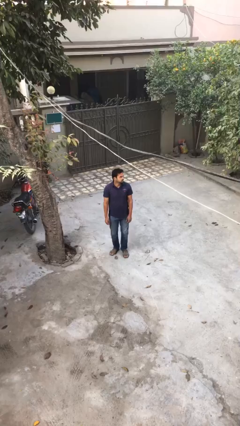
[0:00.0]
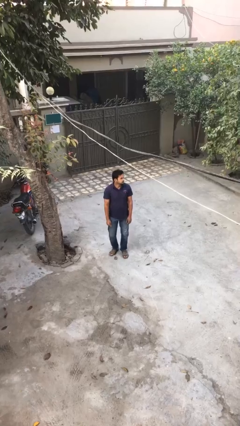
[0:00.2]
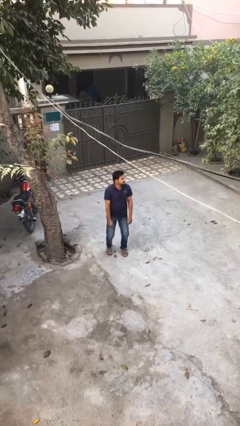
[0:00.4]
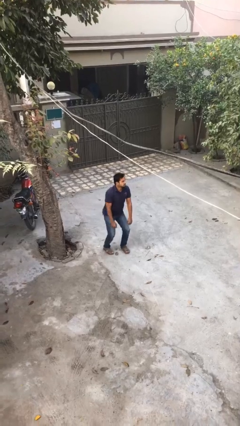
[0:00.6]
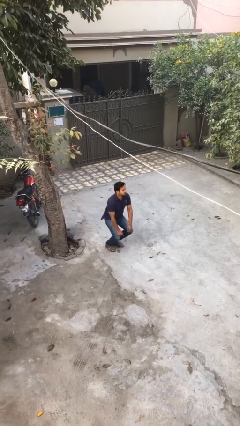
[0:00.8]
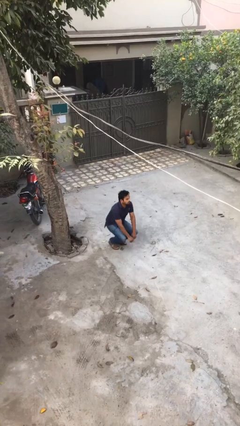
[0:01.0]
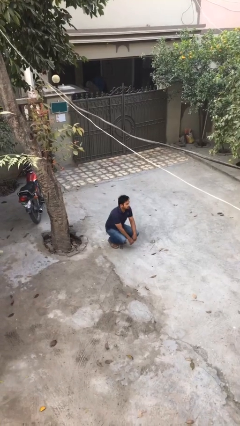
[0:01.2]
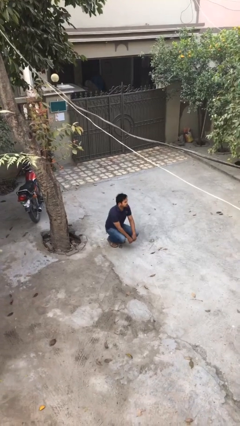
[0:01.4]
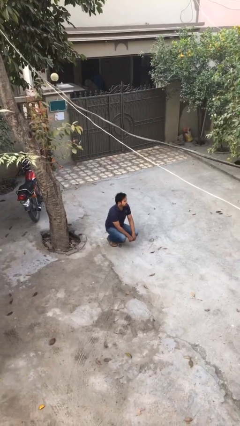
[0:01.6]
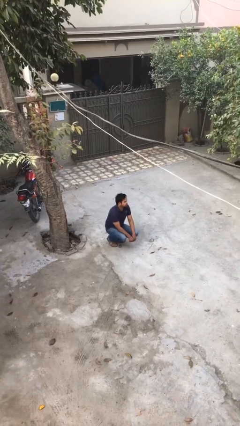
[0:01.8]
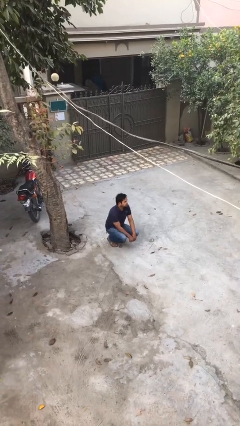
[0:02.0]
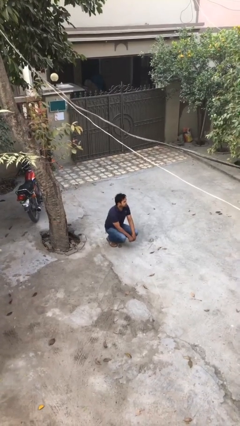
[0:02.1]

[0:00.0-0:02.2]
person sits down

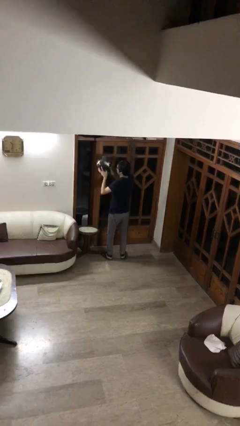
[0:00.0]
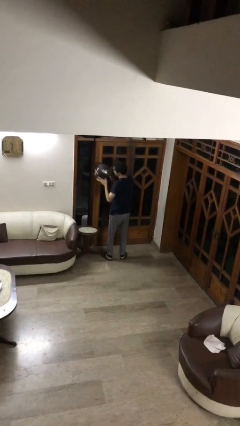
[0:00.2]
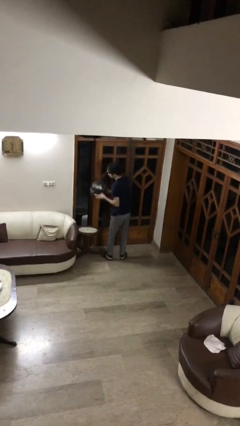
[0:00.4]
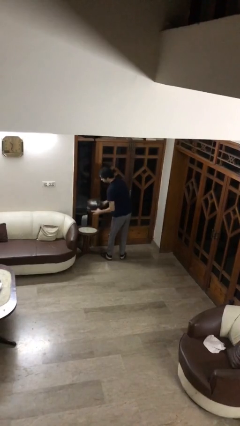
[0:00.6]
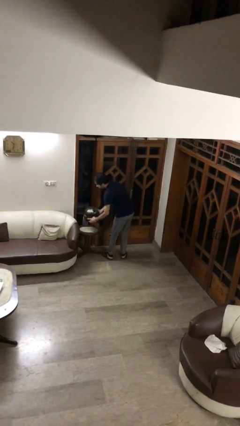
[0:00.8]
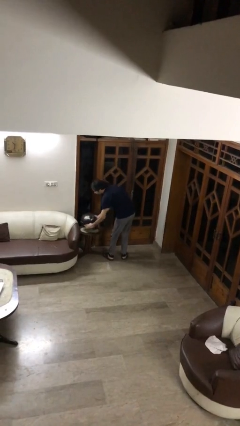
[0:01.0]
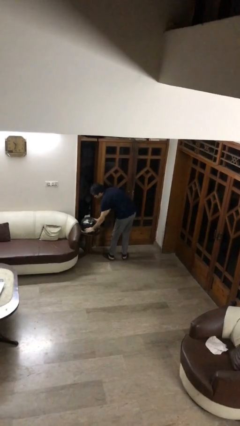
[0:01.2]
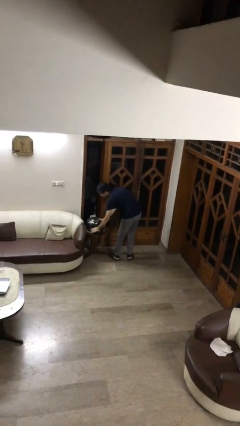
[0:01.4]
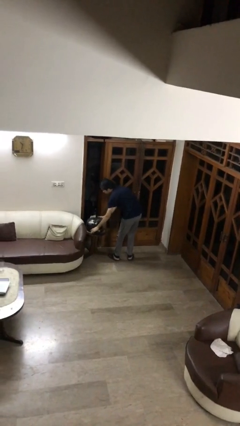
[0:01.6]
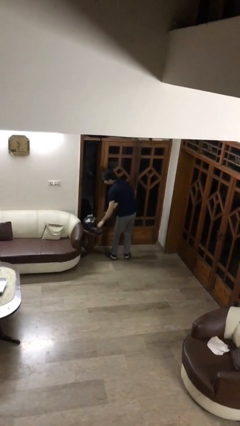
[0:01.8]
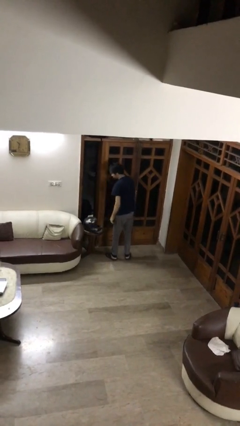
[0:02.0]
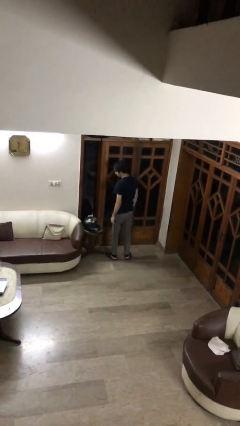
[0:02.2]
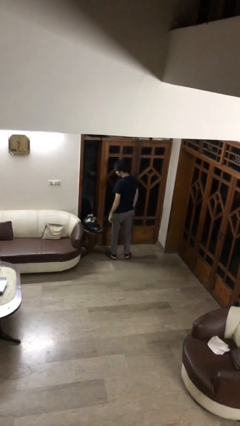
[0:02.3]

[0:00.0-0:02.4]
person puts down object on table

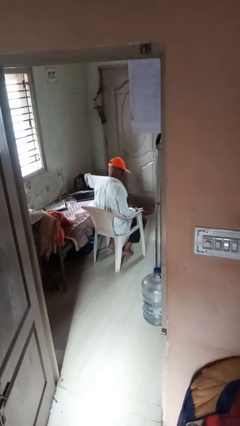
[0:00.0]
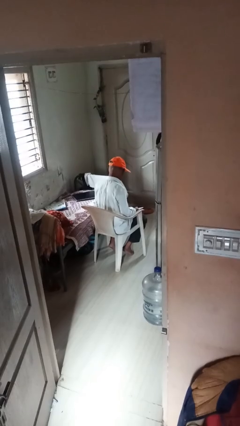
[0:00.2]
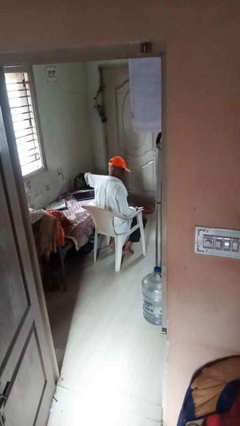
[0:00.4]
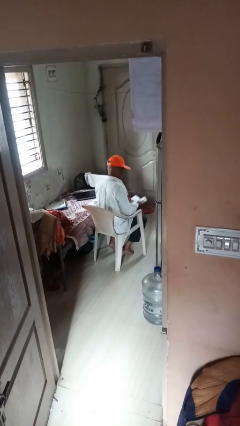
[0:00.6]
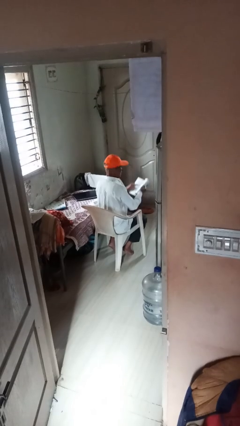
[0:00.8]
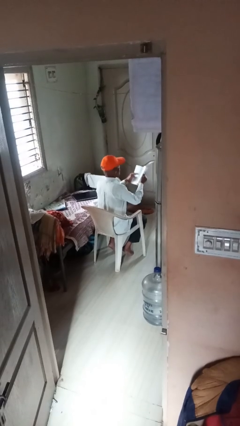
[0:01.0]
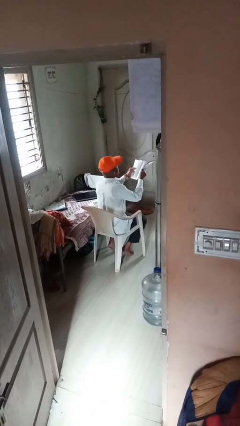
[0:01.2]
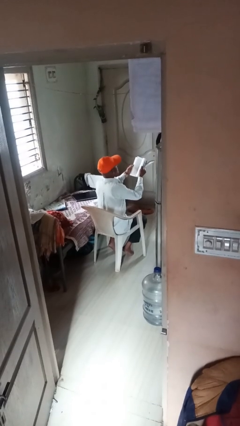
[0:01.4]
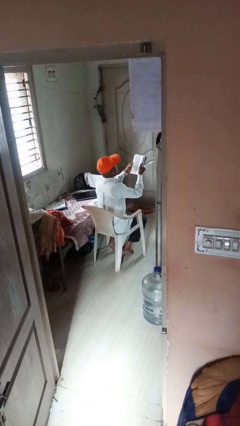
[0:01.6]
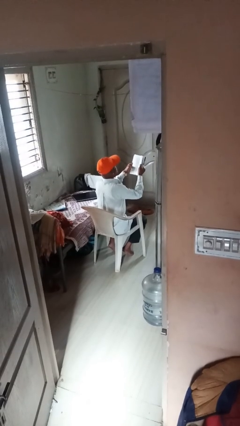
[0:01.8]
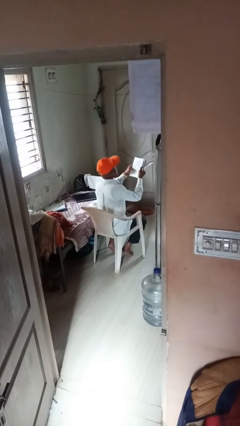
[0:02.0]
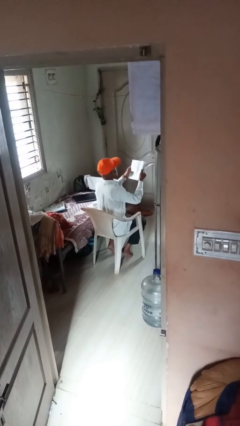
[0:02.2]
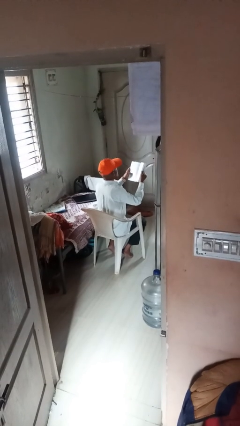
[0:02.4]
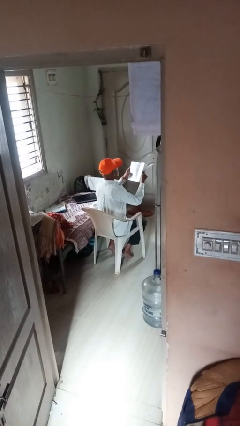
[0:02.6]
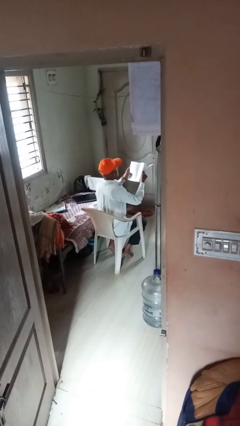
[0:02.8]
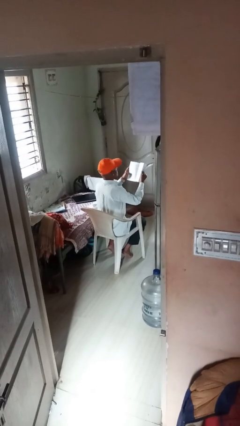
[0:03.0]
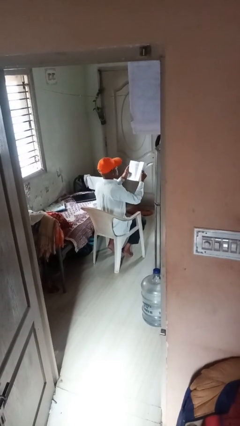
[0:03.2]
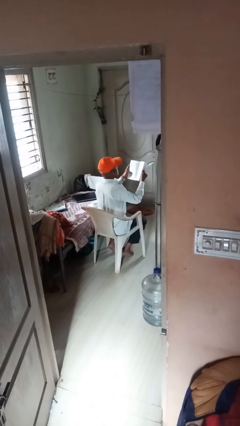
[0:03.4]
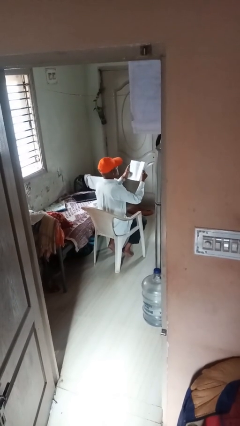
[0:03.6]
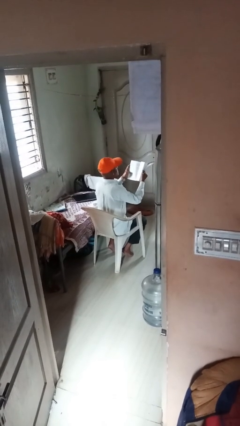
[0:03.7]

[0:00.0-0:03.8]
person reads book

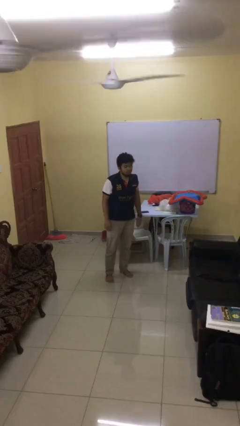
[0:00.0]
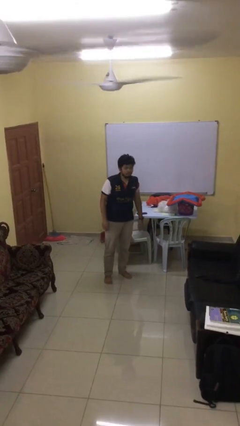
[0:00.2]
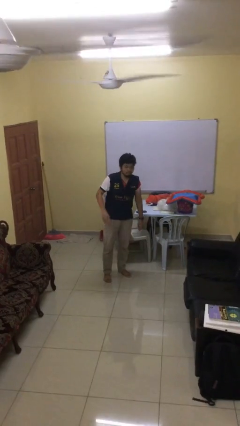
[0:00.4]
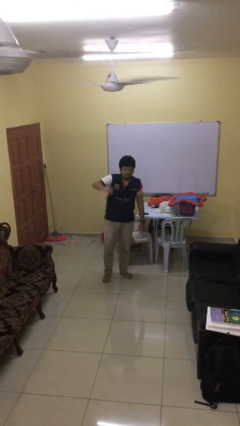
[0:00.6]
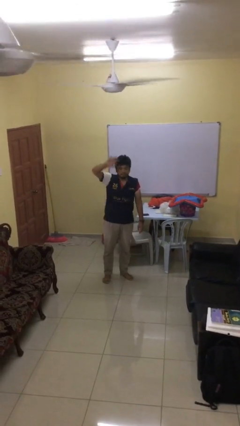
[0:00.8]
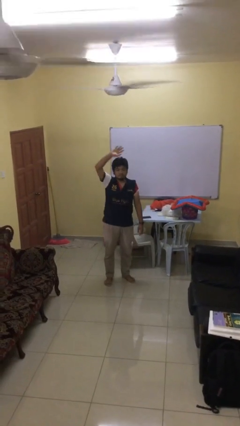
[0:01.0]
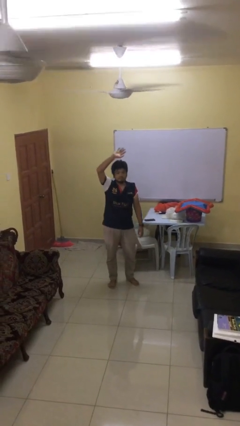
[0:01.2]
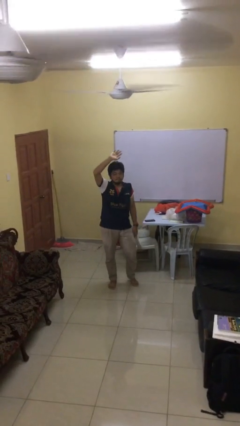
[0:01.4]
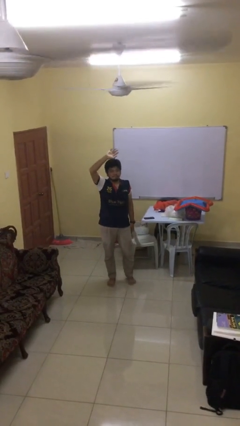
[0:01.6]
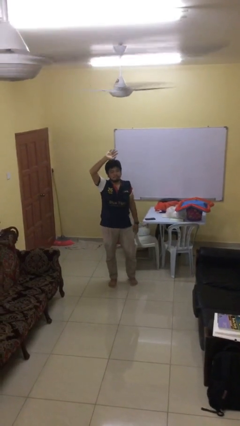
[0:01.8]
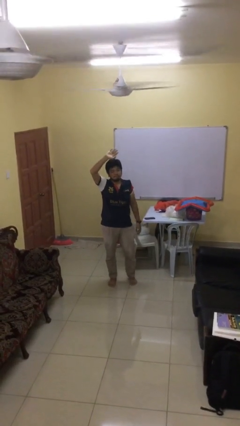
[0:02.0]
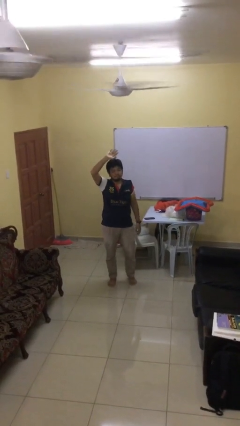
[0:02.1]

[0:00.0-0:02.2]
person gestures raise hand

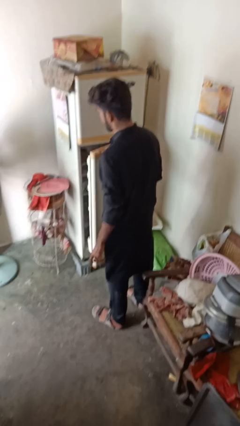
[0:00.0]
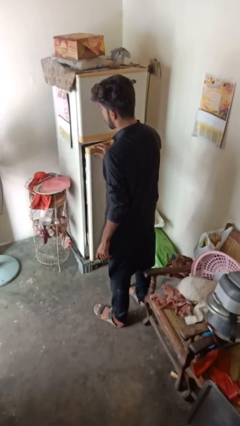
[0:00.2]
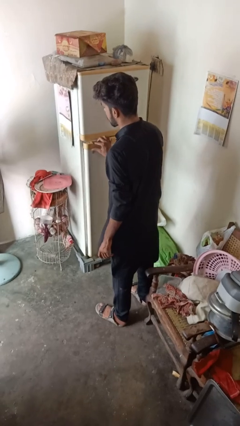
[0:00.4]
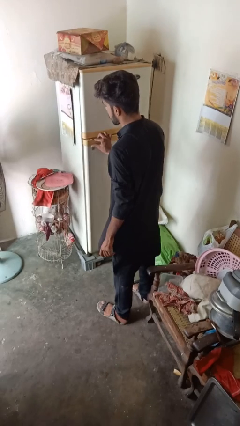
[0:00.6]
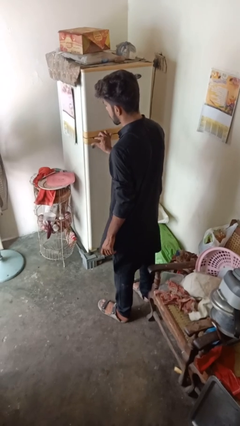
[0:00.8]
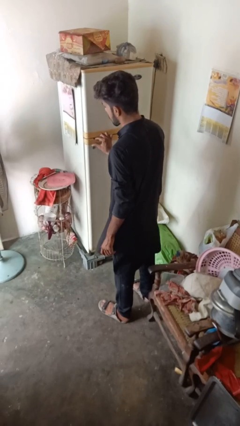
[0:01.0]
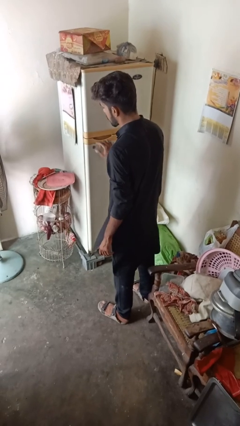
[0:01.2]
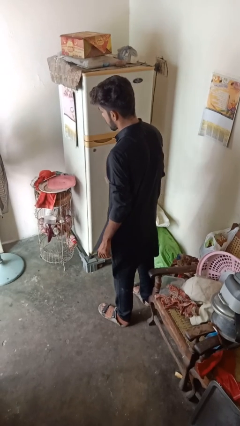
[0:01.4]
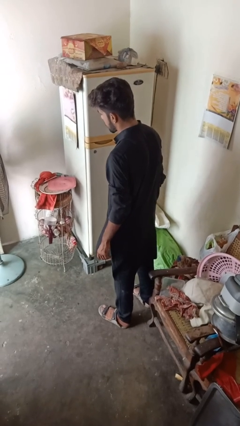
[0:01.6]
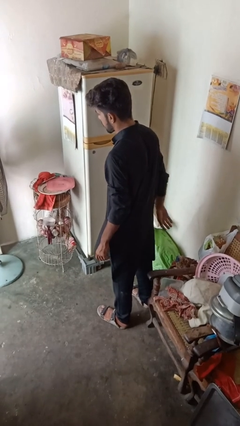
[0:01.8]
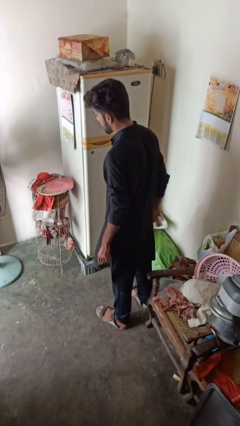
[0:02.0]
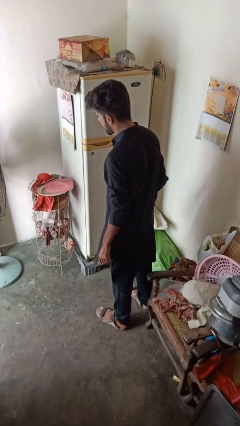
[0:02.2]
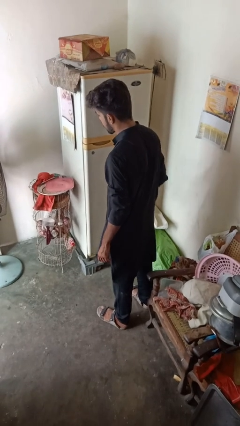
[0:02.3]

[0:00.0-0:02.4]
person closes refrigerator

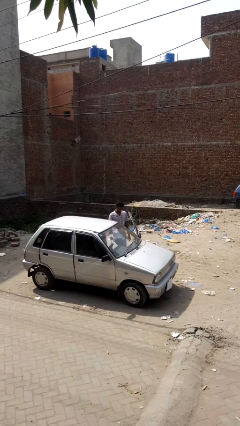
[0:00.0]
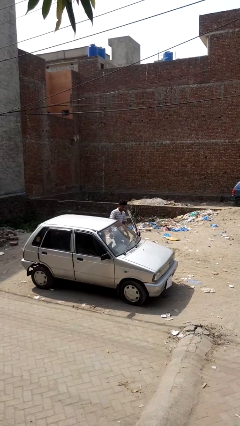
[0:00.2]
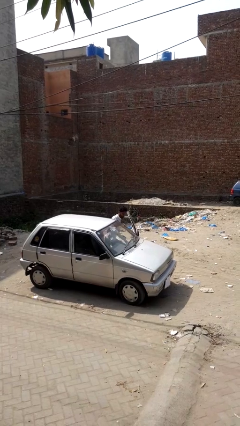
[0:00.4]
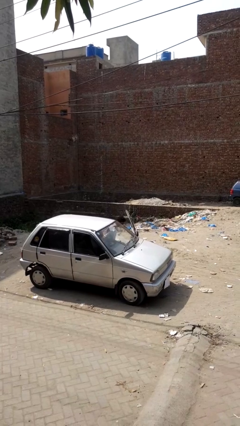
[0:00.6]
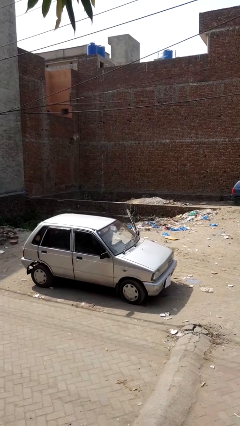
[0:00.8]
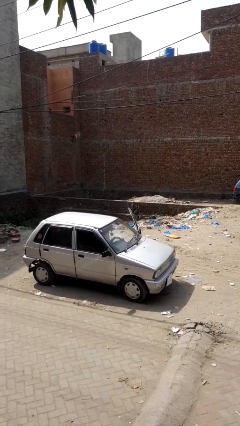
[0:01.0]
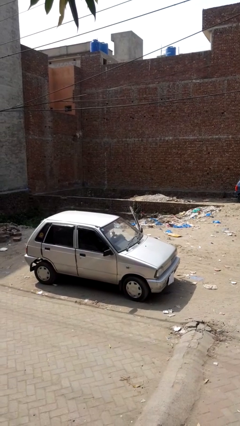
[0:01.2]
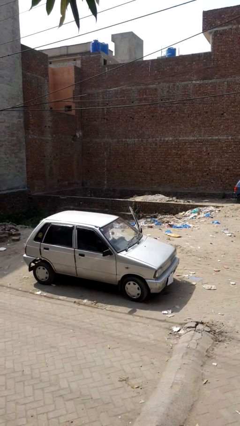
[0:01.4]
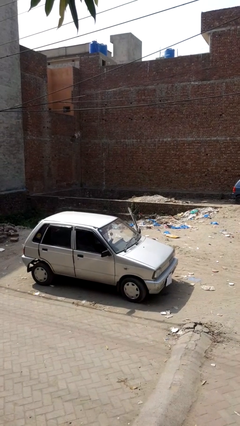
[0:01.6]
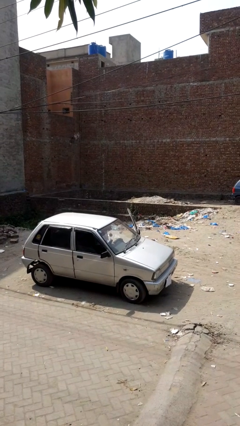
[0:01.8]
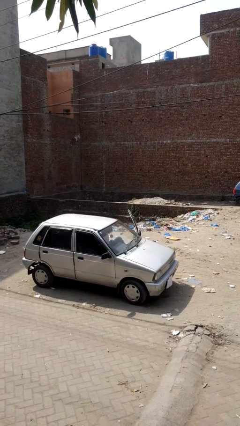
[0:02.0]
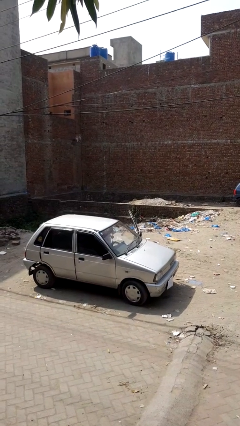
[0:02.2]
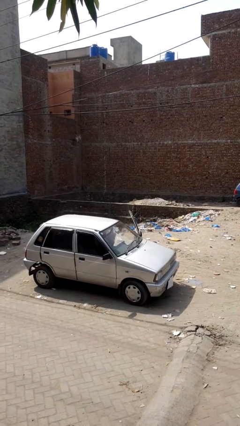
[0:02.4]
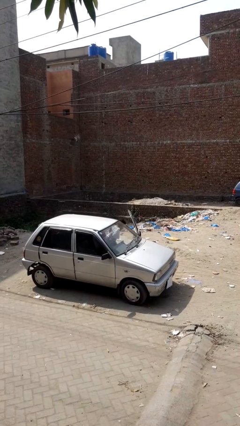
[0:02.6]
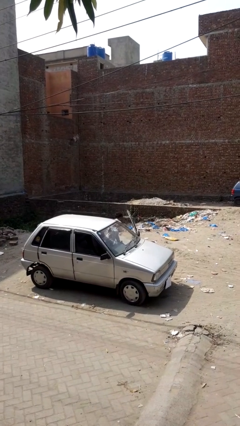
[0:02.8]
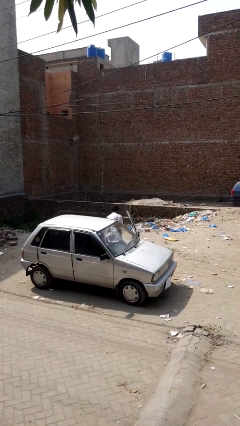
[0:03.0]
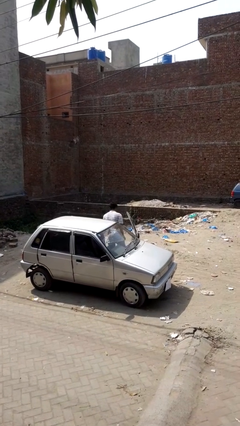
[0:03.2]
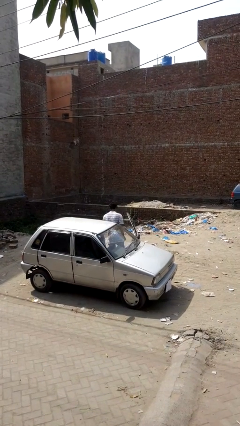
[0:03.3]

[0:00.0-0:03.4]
person enters car

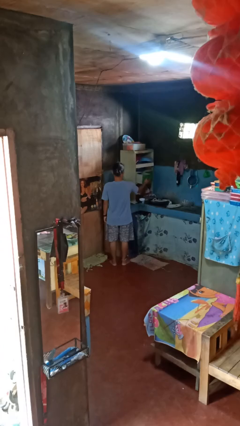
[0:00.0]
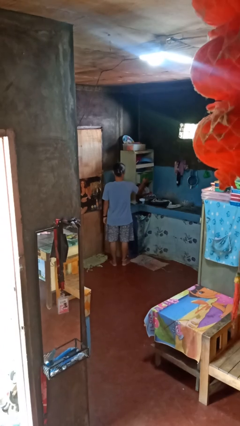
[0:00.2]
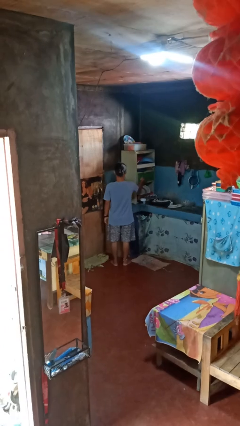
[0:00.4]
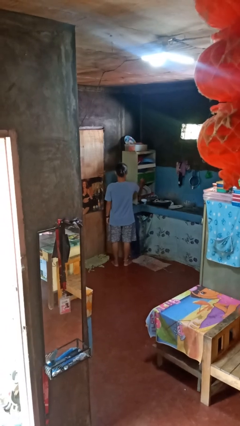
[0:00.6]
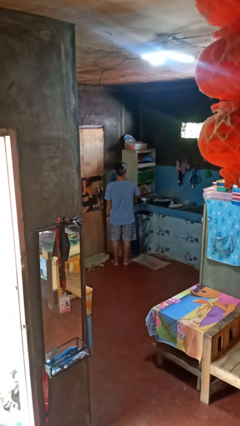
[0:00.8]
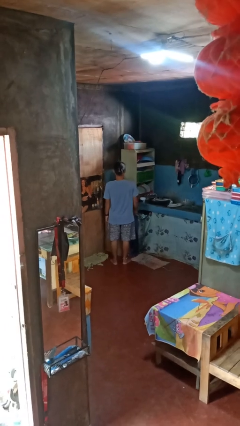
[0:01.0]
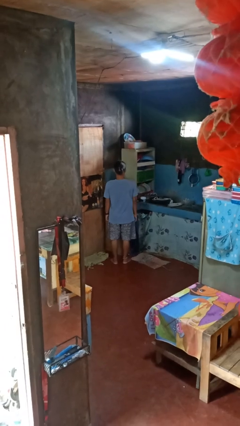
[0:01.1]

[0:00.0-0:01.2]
person closes kitchen drawer
